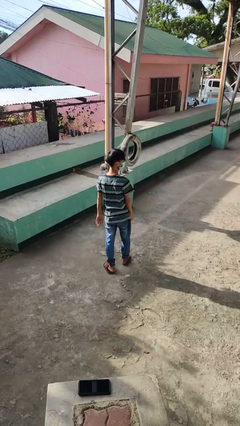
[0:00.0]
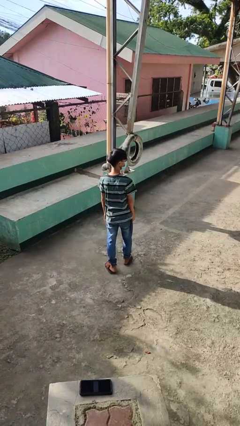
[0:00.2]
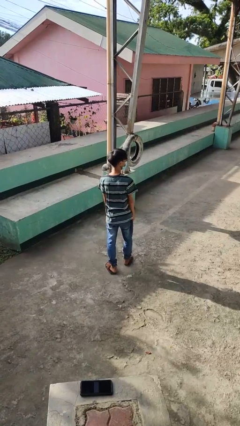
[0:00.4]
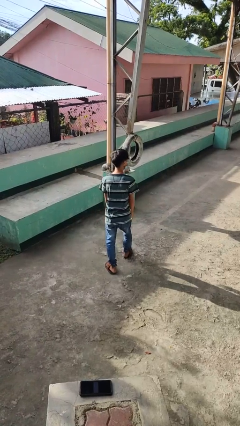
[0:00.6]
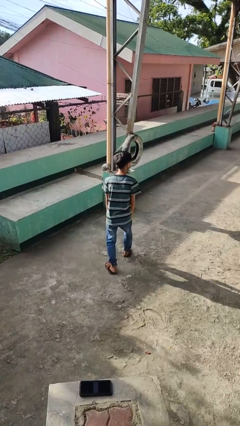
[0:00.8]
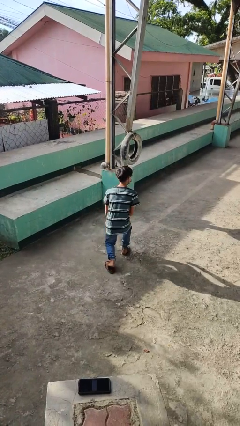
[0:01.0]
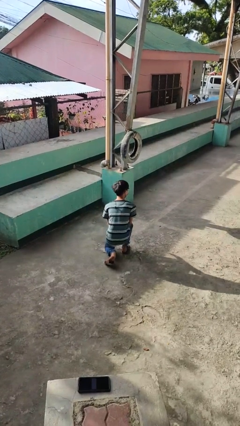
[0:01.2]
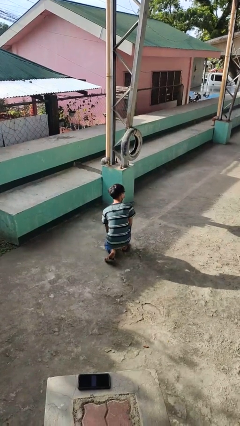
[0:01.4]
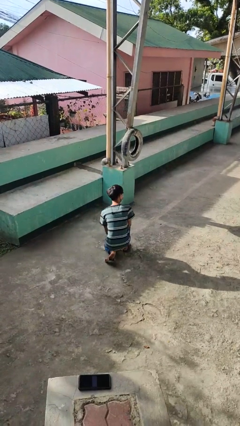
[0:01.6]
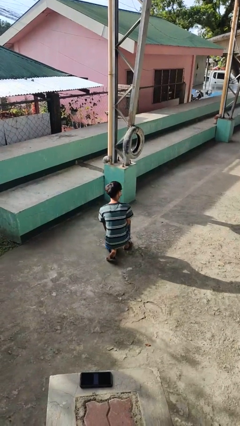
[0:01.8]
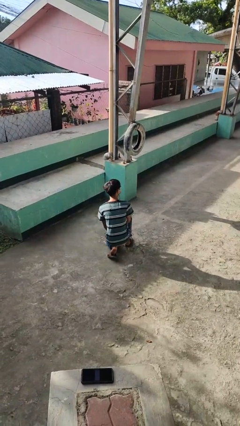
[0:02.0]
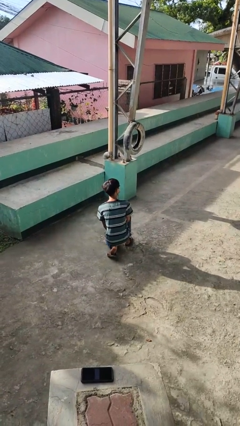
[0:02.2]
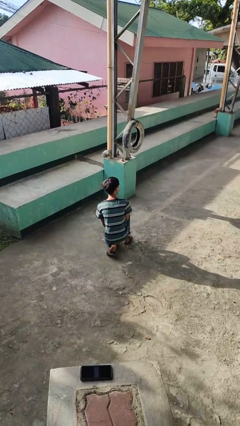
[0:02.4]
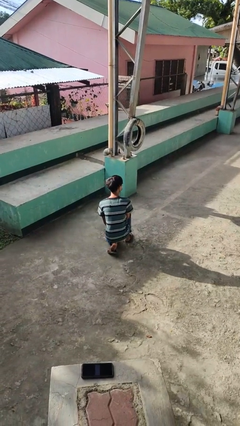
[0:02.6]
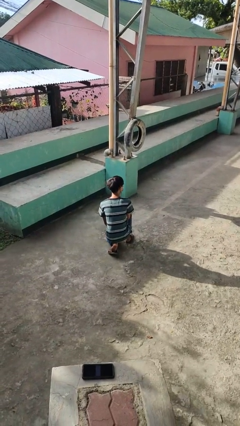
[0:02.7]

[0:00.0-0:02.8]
person kneels

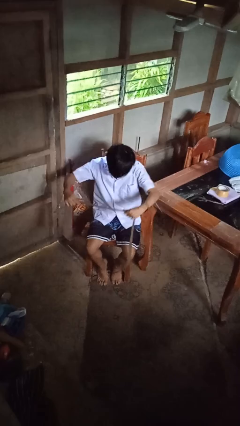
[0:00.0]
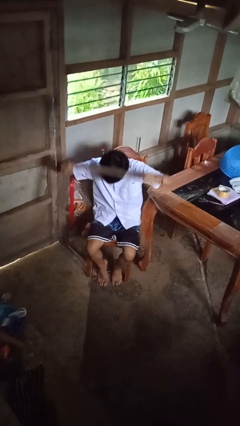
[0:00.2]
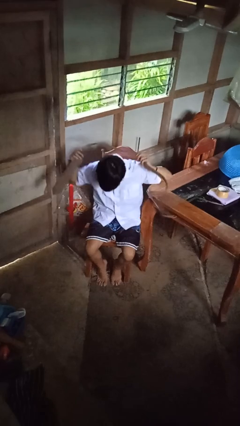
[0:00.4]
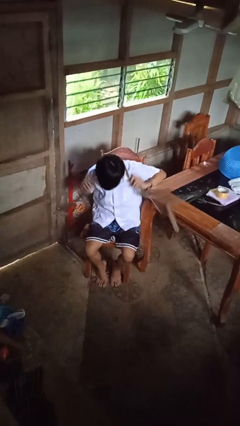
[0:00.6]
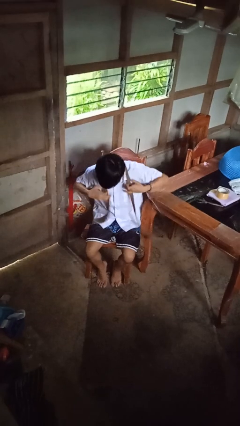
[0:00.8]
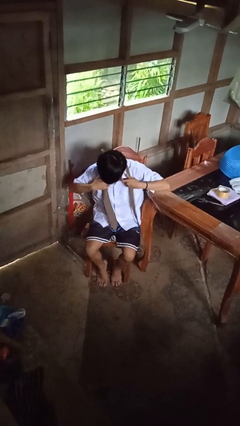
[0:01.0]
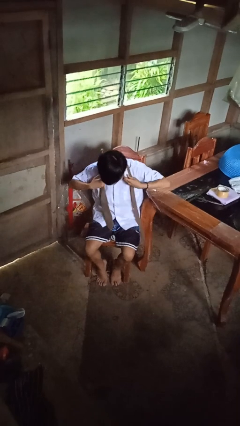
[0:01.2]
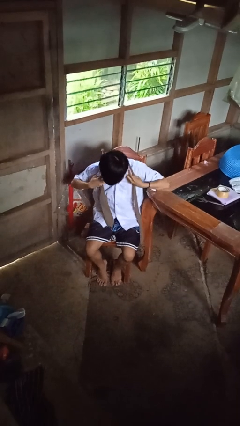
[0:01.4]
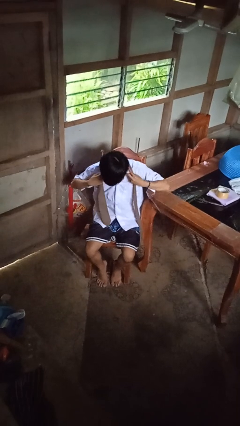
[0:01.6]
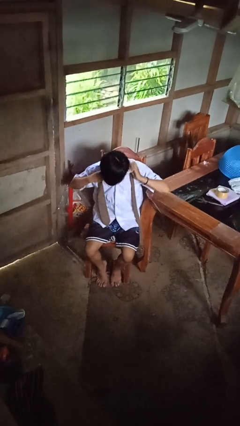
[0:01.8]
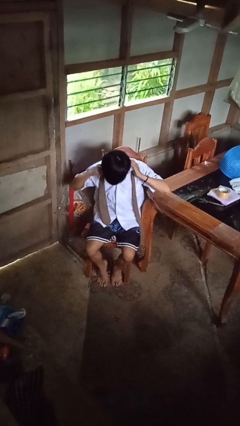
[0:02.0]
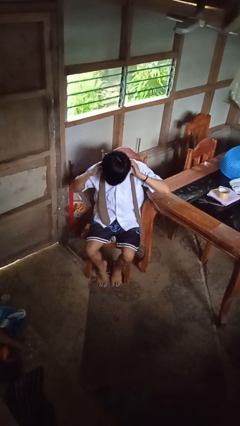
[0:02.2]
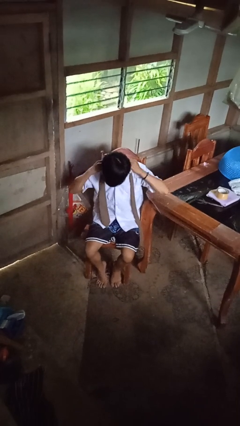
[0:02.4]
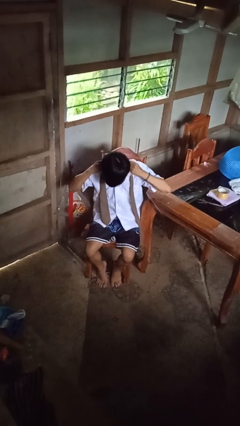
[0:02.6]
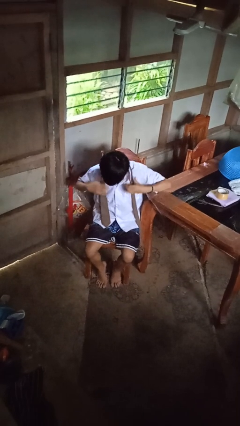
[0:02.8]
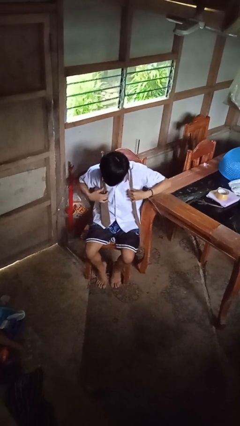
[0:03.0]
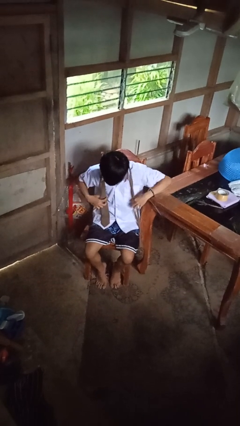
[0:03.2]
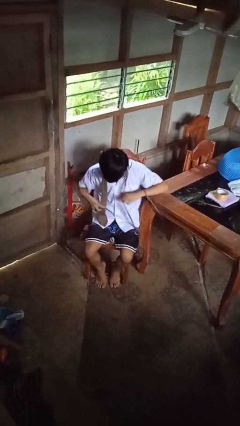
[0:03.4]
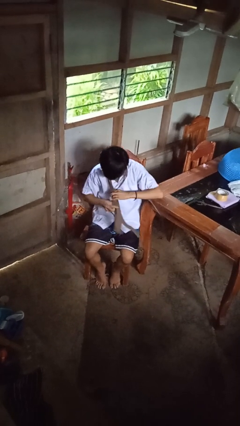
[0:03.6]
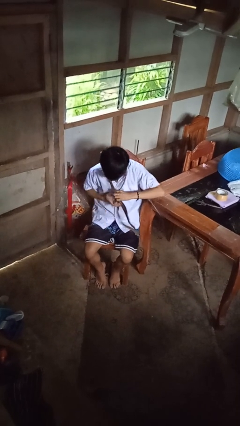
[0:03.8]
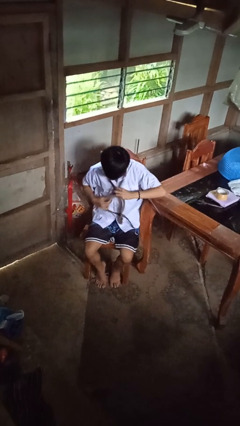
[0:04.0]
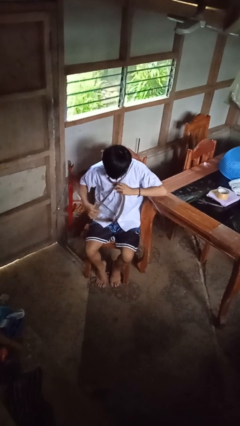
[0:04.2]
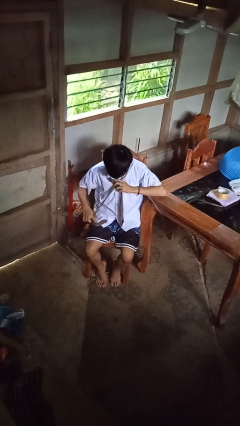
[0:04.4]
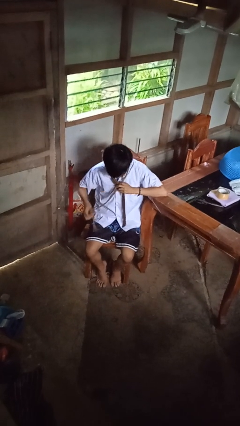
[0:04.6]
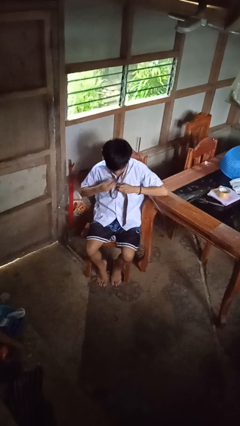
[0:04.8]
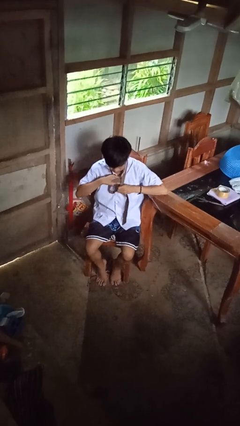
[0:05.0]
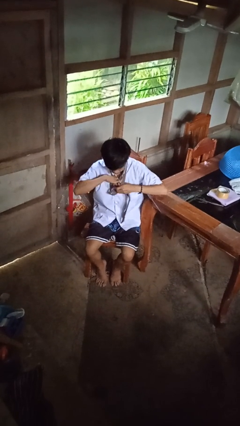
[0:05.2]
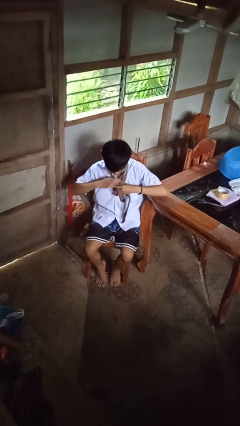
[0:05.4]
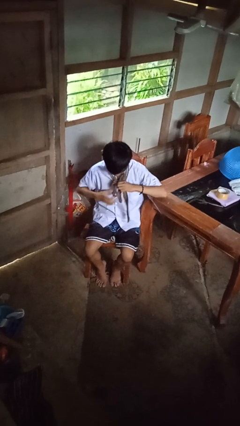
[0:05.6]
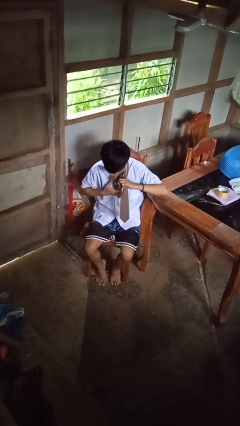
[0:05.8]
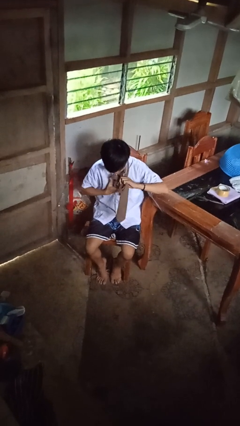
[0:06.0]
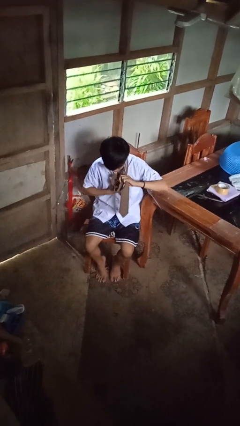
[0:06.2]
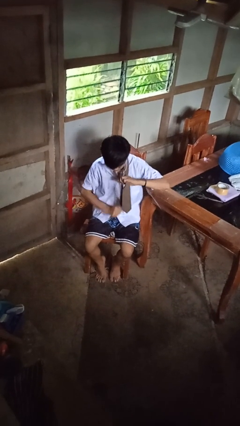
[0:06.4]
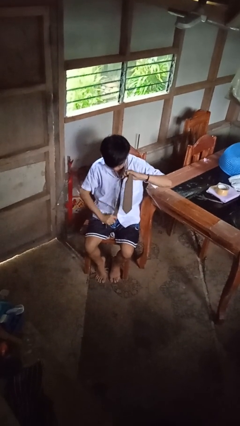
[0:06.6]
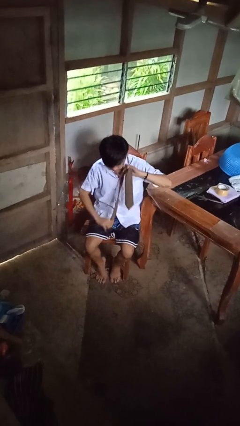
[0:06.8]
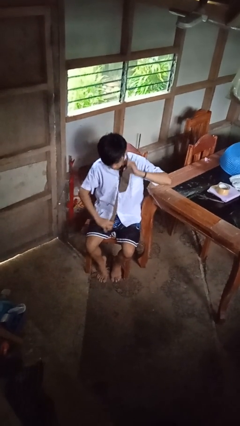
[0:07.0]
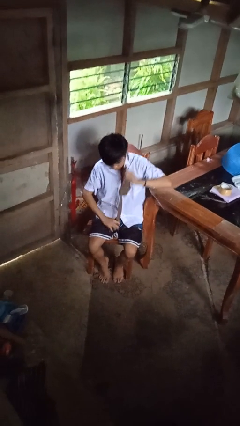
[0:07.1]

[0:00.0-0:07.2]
person puts on necktie

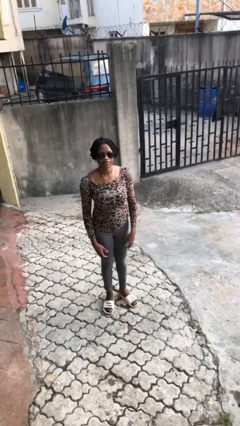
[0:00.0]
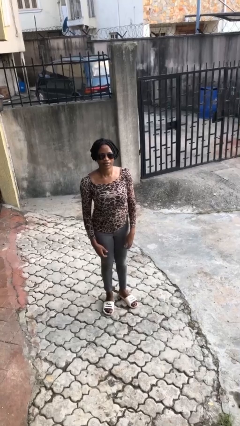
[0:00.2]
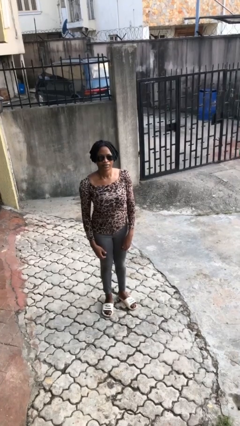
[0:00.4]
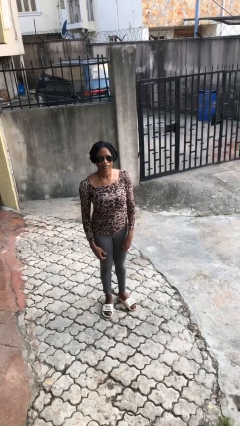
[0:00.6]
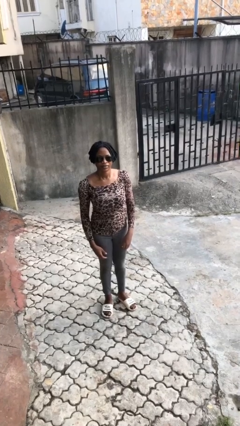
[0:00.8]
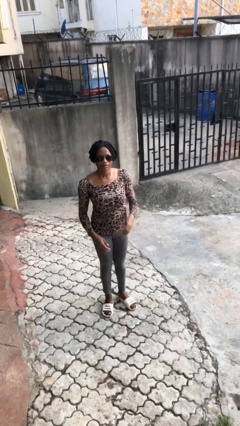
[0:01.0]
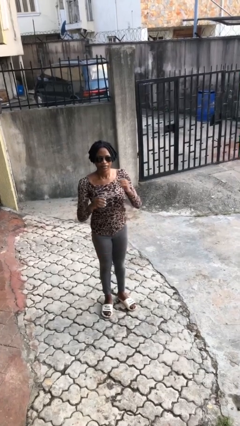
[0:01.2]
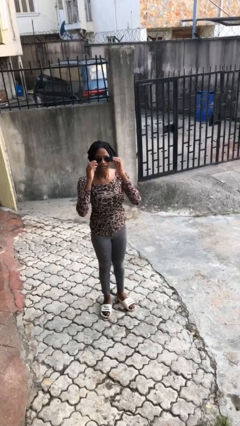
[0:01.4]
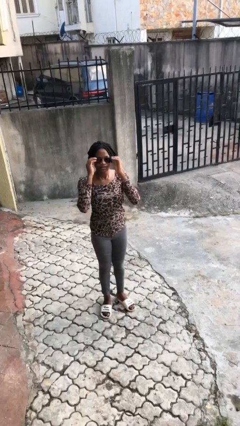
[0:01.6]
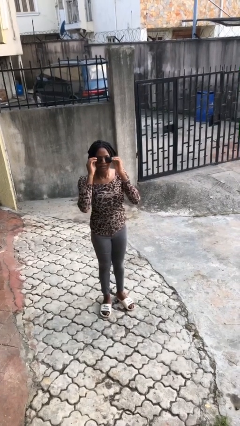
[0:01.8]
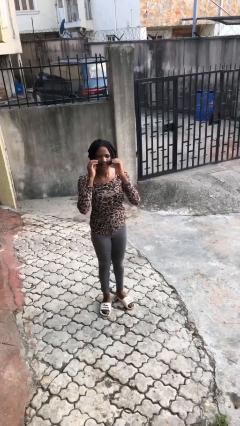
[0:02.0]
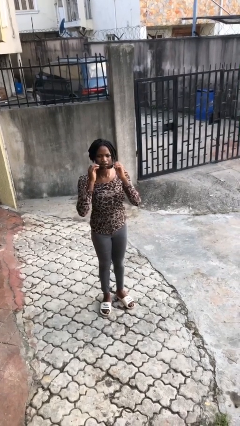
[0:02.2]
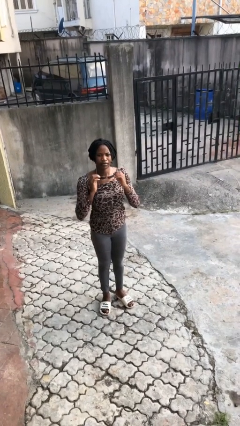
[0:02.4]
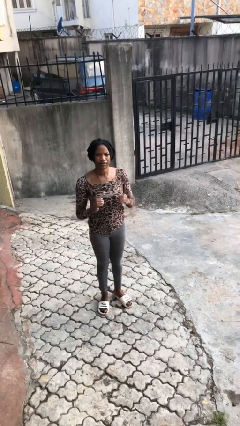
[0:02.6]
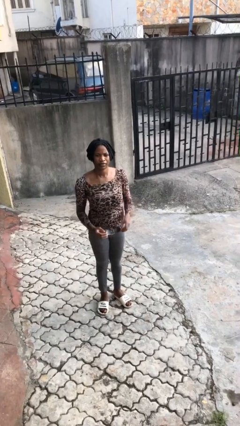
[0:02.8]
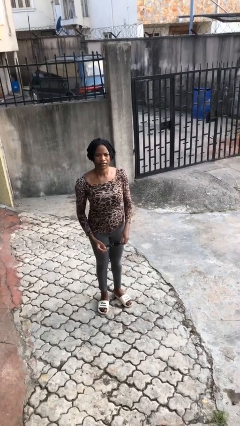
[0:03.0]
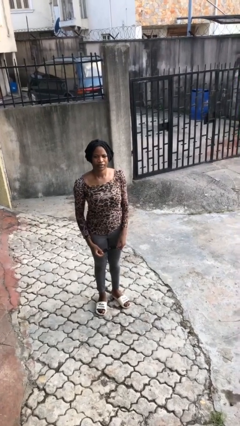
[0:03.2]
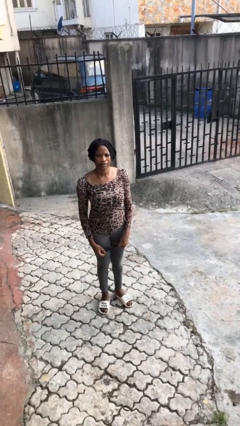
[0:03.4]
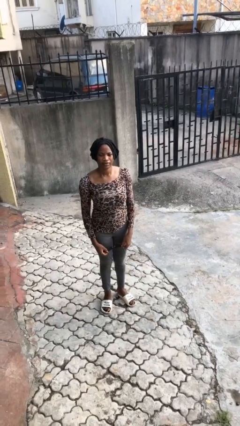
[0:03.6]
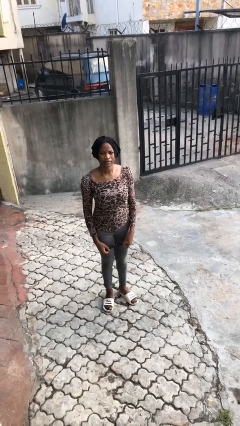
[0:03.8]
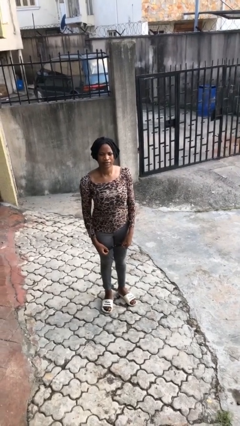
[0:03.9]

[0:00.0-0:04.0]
person takes off sunglasses

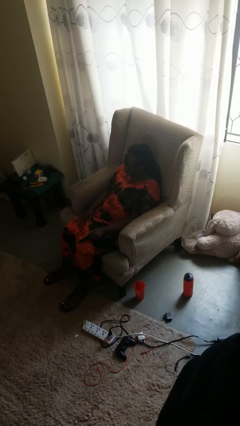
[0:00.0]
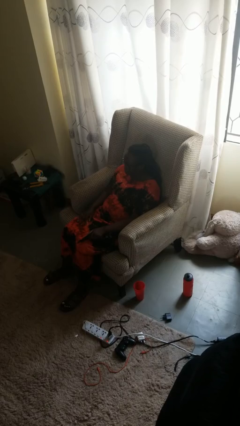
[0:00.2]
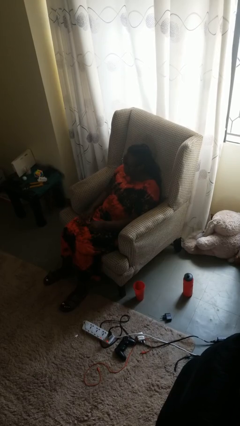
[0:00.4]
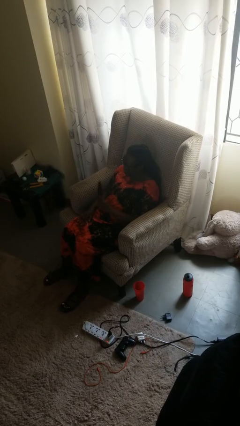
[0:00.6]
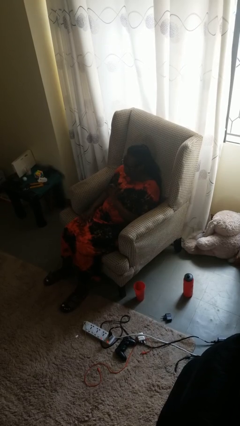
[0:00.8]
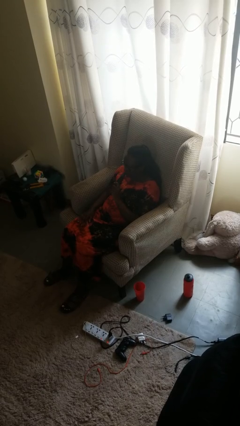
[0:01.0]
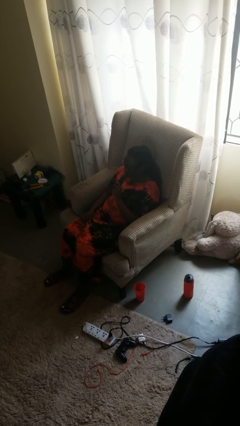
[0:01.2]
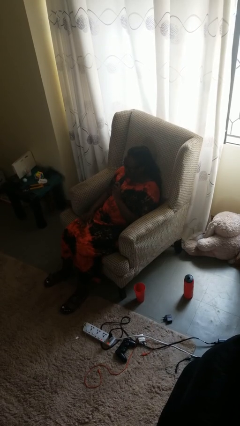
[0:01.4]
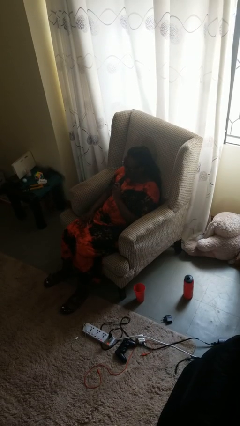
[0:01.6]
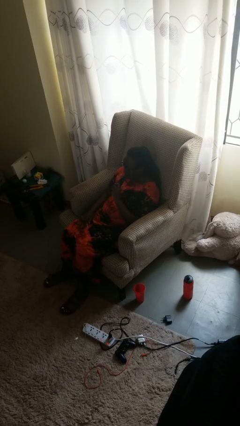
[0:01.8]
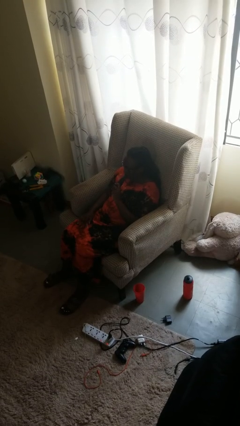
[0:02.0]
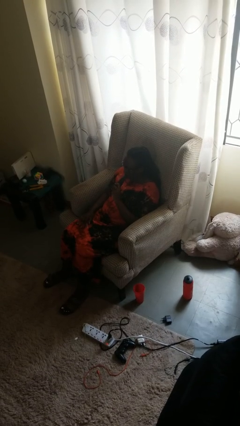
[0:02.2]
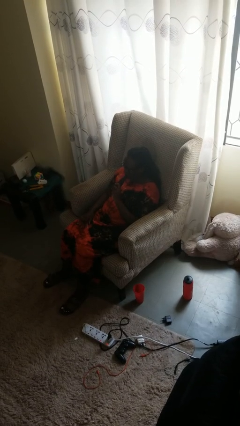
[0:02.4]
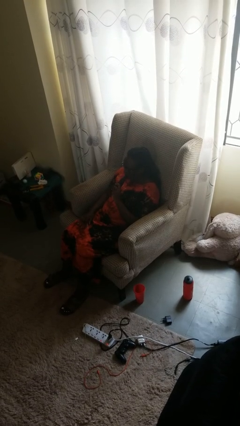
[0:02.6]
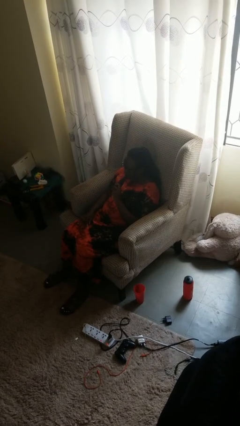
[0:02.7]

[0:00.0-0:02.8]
person vapes

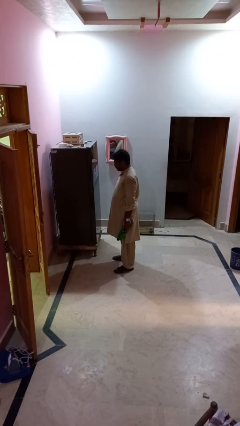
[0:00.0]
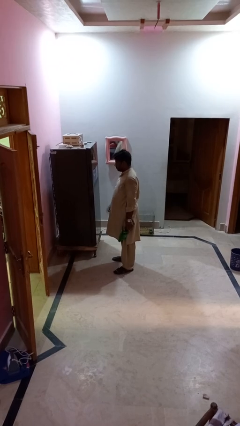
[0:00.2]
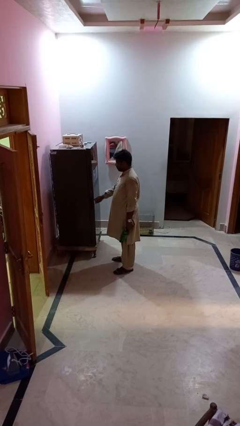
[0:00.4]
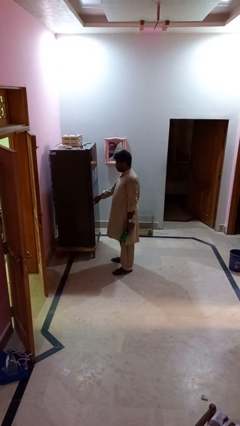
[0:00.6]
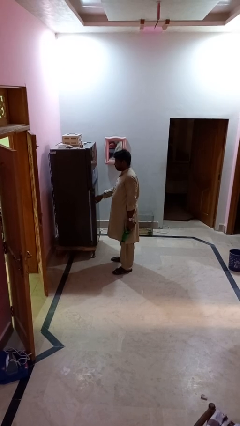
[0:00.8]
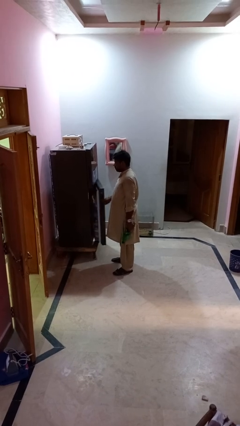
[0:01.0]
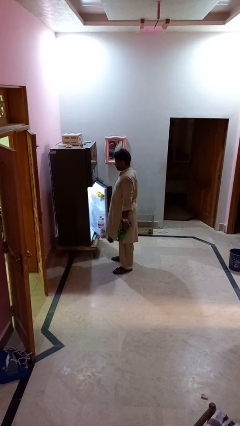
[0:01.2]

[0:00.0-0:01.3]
person opens refrigerator
